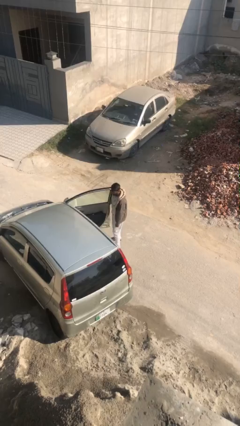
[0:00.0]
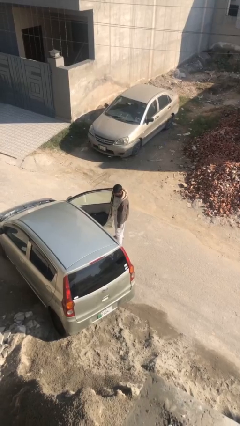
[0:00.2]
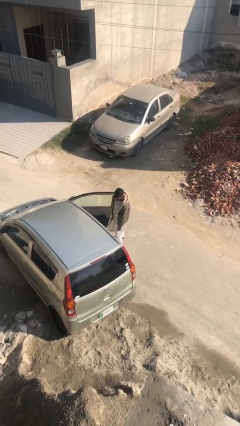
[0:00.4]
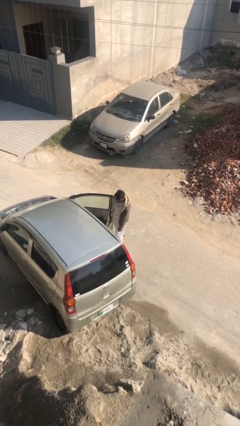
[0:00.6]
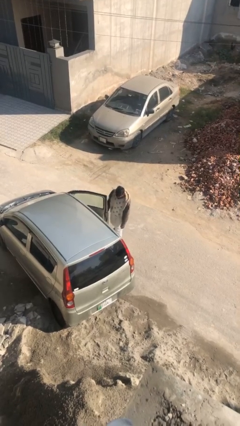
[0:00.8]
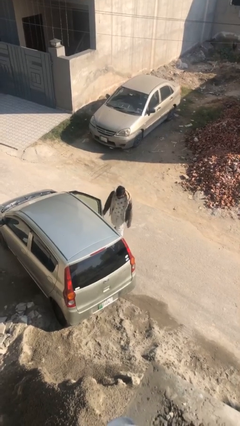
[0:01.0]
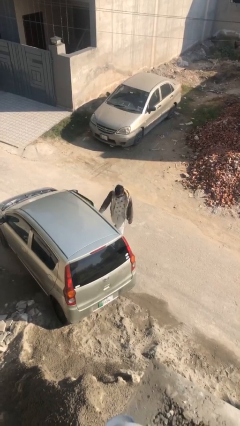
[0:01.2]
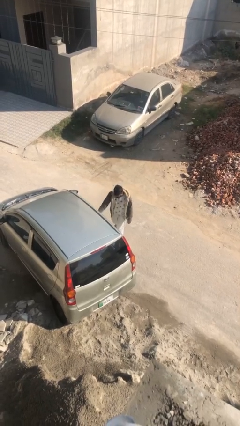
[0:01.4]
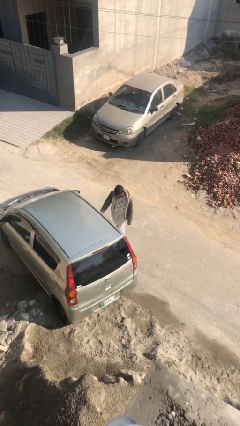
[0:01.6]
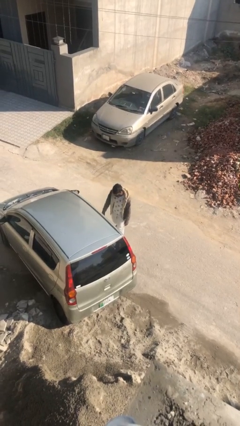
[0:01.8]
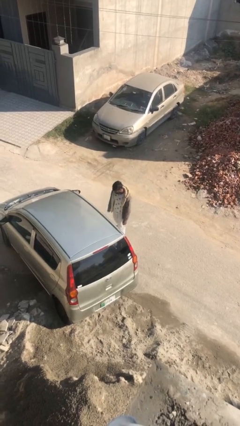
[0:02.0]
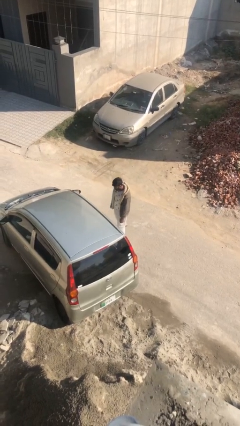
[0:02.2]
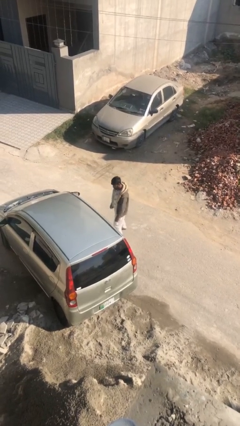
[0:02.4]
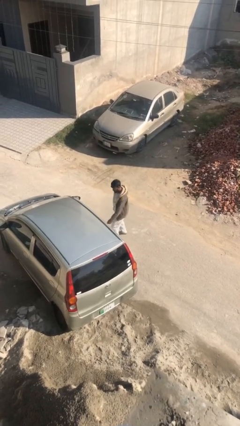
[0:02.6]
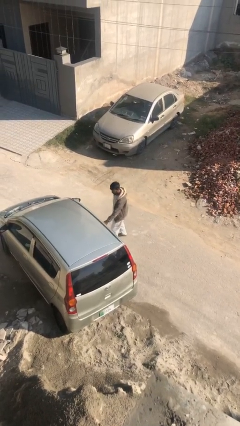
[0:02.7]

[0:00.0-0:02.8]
person closes car door

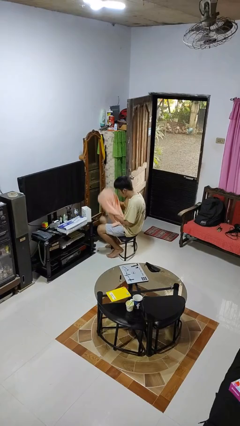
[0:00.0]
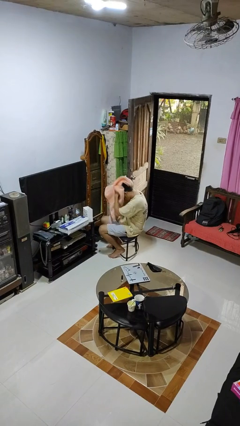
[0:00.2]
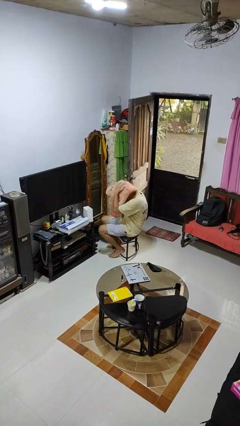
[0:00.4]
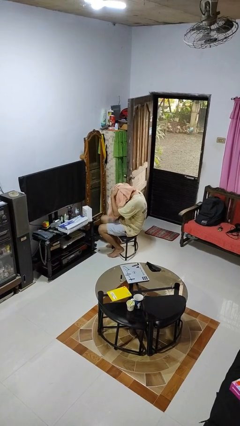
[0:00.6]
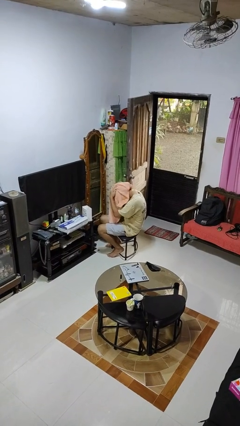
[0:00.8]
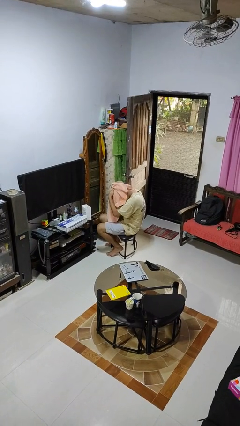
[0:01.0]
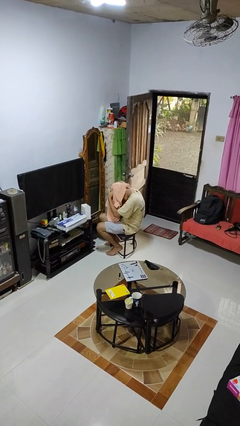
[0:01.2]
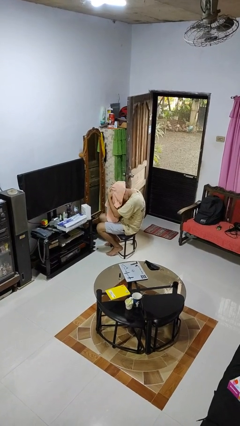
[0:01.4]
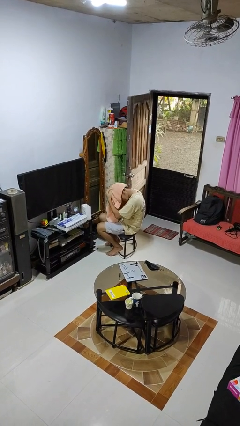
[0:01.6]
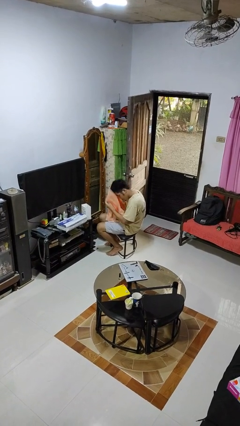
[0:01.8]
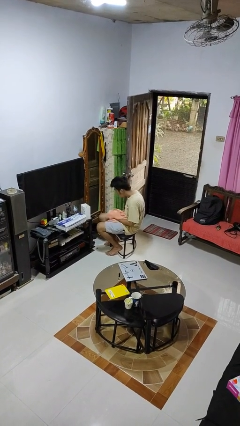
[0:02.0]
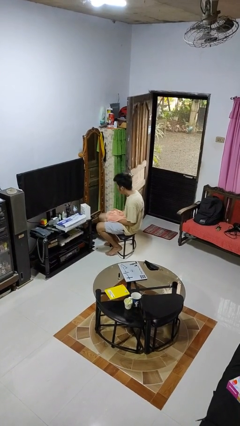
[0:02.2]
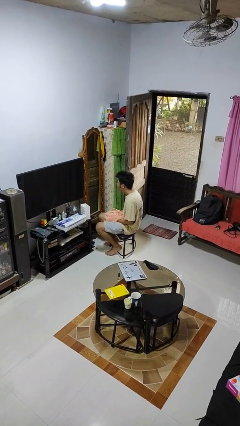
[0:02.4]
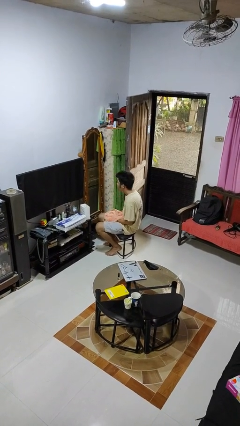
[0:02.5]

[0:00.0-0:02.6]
person dries hair with towel

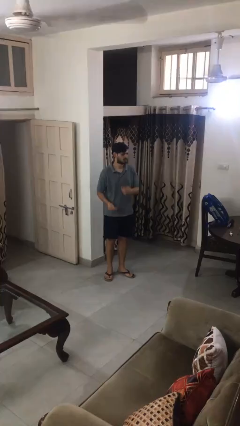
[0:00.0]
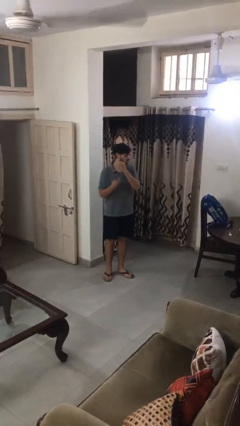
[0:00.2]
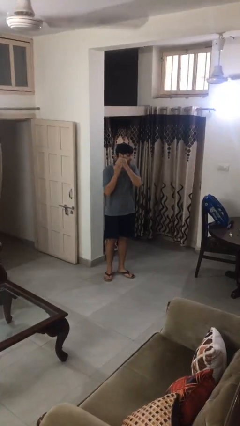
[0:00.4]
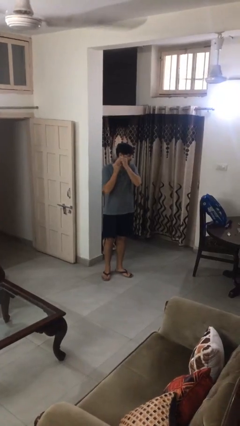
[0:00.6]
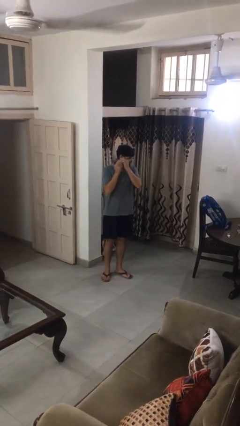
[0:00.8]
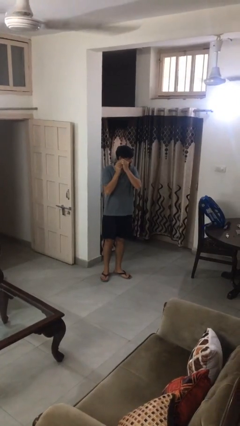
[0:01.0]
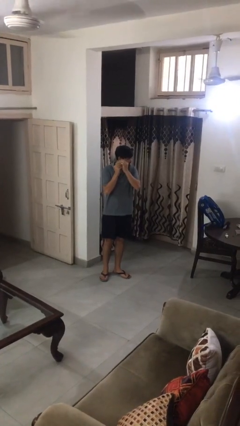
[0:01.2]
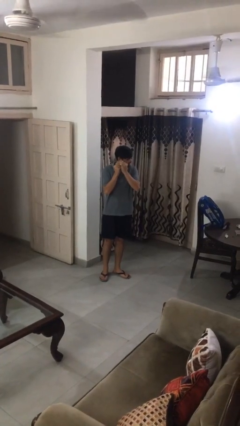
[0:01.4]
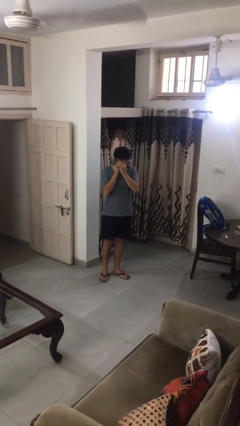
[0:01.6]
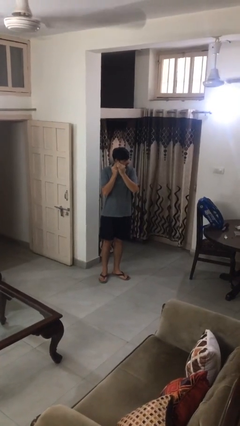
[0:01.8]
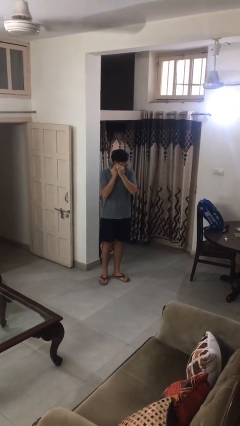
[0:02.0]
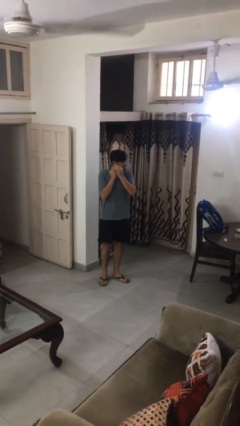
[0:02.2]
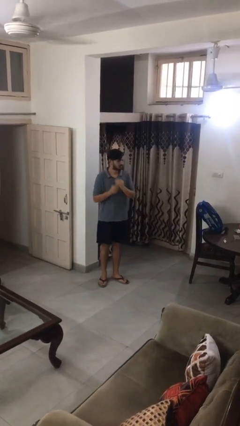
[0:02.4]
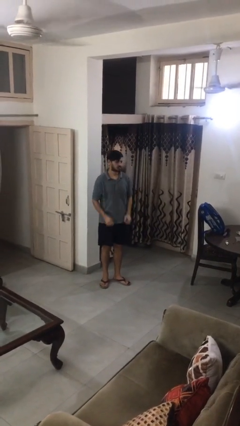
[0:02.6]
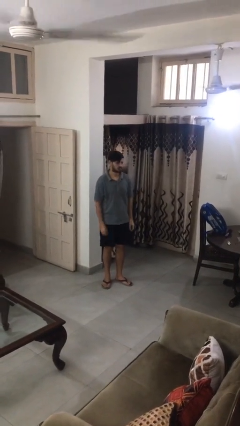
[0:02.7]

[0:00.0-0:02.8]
person puts on earrings

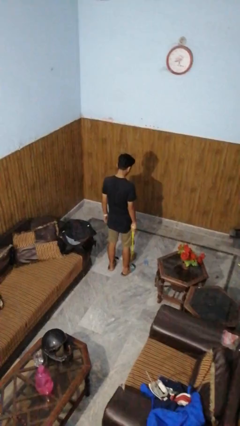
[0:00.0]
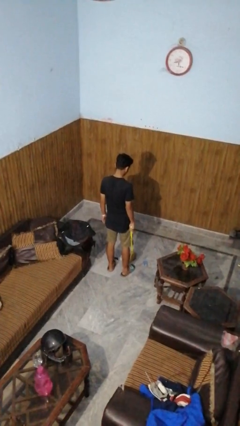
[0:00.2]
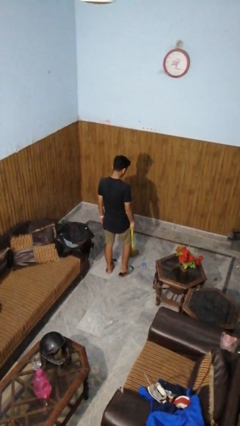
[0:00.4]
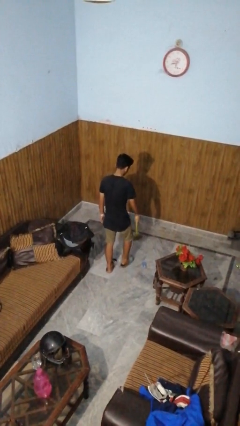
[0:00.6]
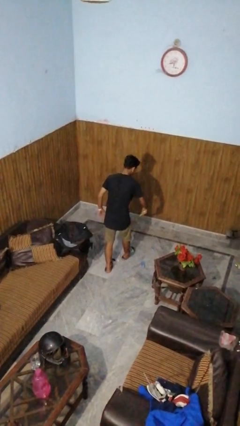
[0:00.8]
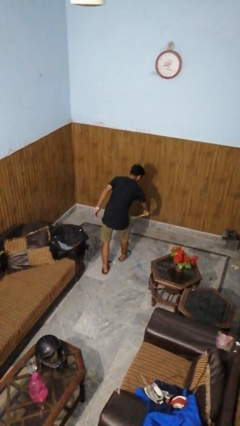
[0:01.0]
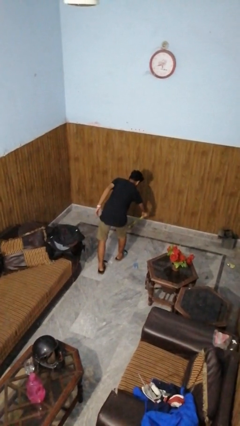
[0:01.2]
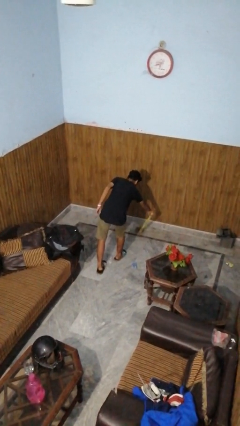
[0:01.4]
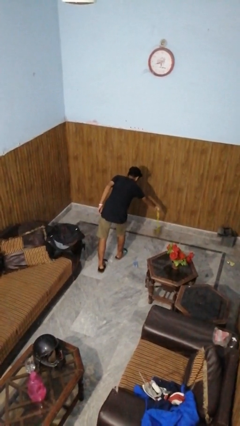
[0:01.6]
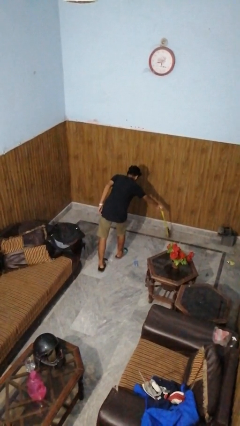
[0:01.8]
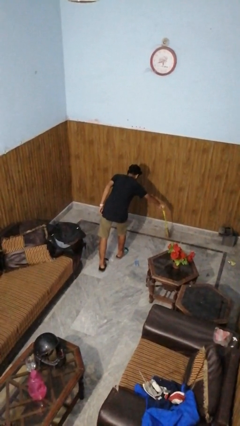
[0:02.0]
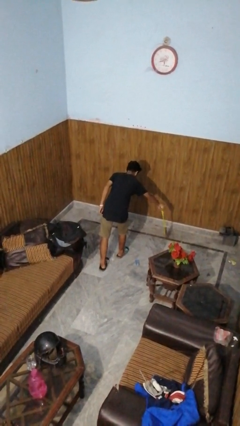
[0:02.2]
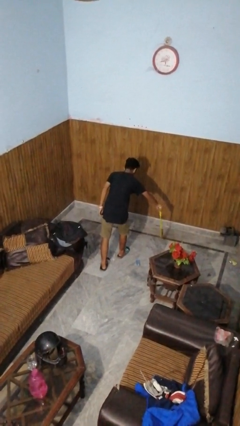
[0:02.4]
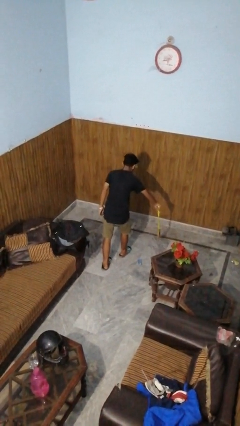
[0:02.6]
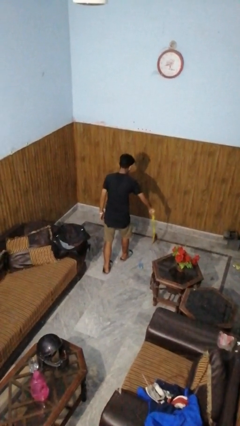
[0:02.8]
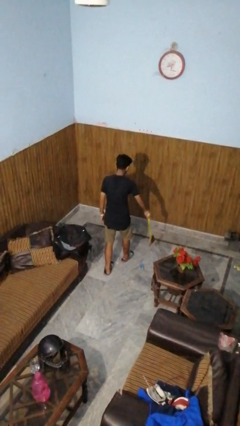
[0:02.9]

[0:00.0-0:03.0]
person sweeps floor

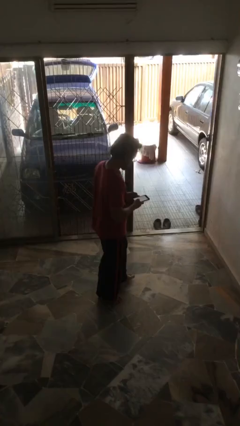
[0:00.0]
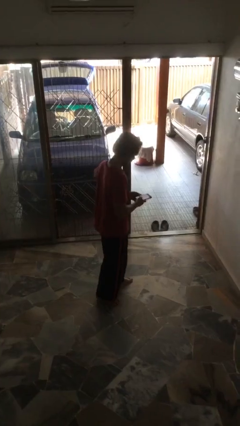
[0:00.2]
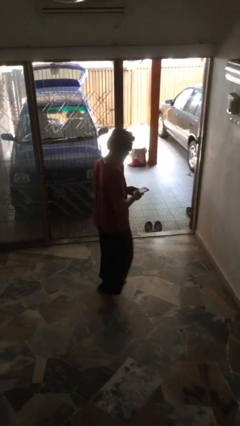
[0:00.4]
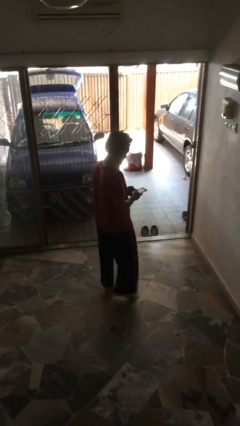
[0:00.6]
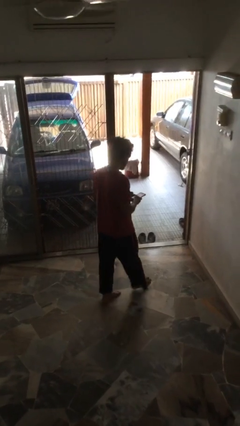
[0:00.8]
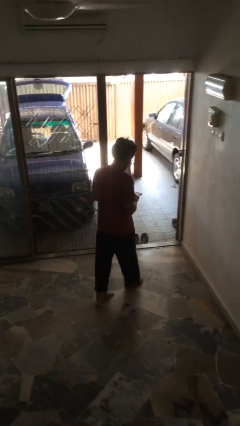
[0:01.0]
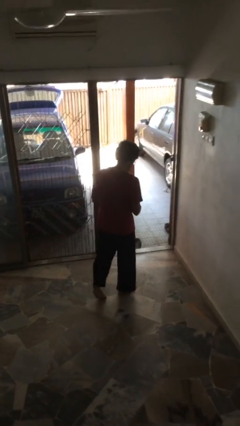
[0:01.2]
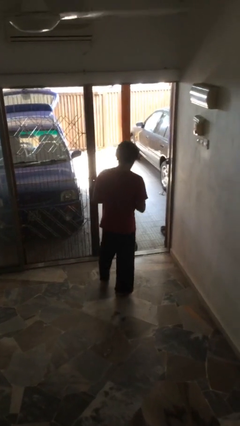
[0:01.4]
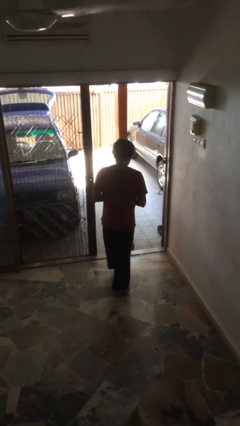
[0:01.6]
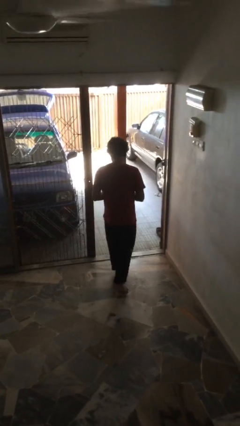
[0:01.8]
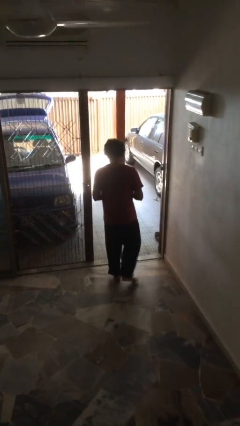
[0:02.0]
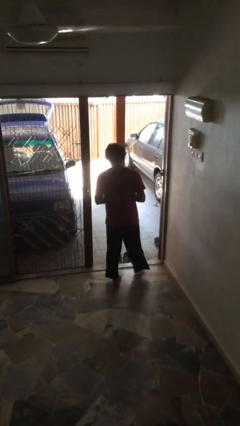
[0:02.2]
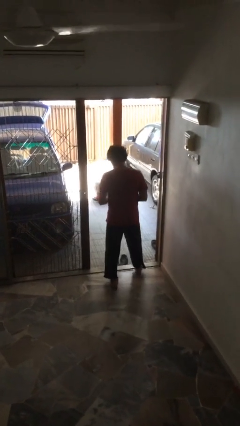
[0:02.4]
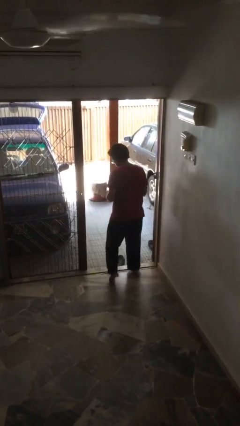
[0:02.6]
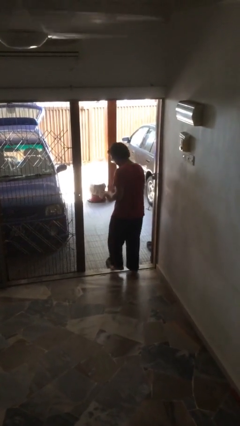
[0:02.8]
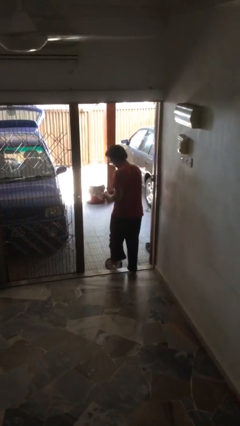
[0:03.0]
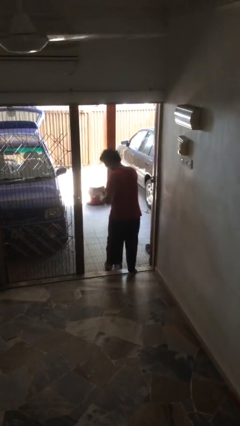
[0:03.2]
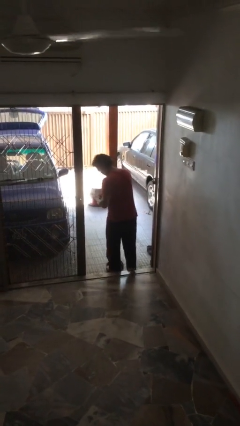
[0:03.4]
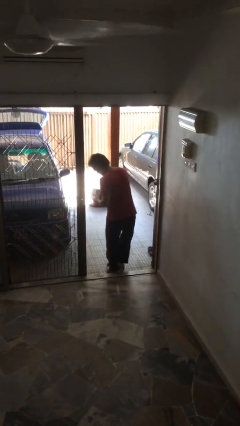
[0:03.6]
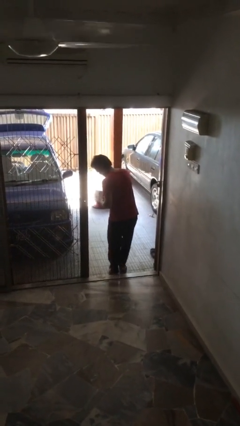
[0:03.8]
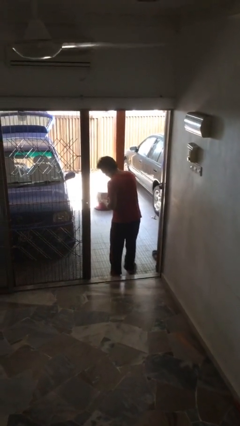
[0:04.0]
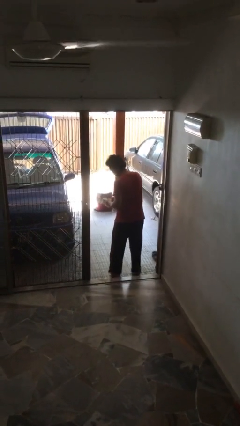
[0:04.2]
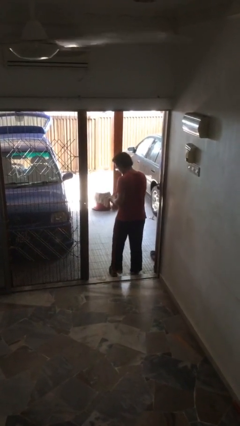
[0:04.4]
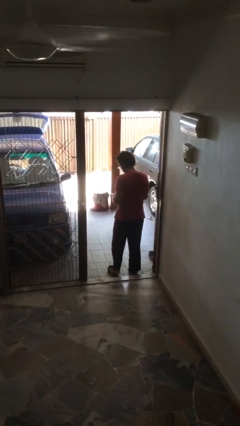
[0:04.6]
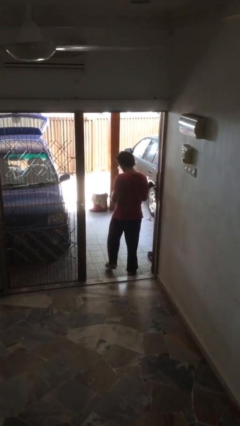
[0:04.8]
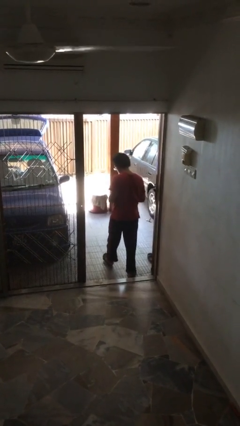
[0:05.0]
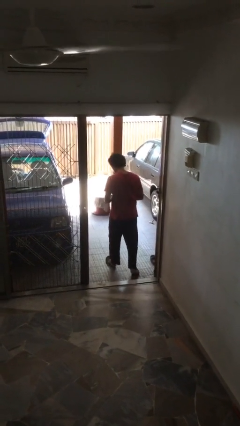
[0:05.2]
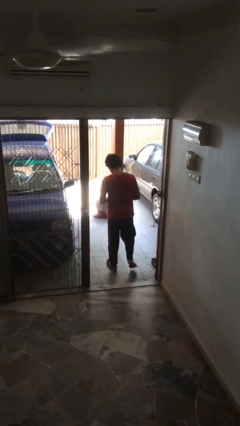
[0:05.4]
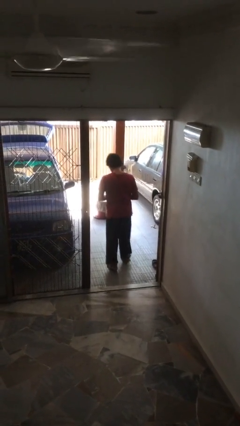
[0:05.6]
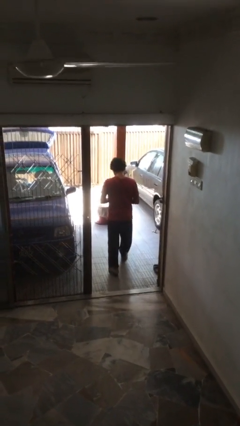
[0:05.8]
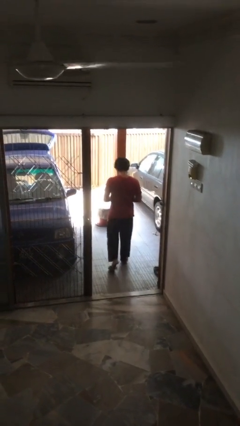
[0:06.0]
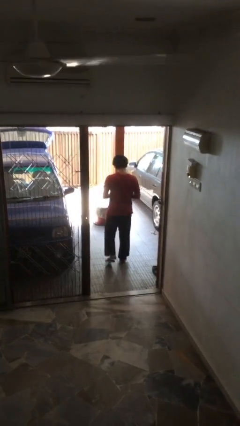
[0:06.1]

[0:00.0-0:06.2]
person texts on phone

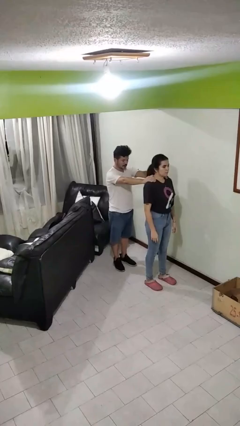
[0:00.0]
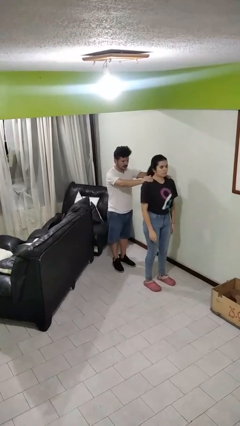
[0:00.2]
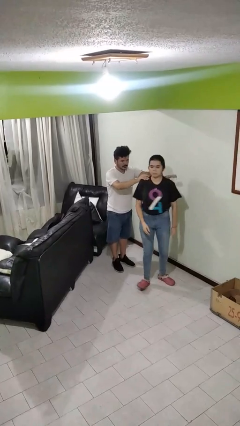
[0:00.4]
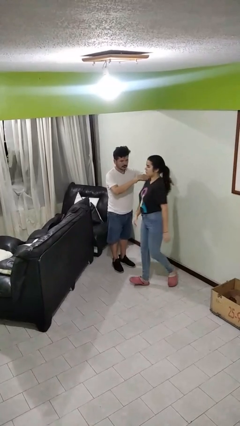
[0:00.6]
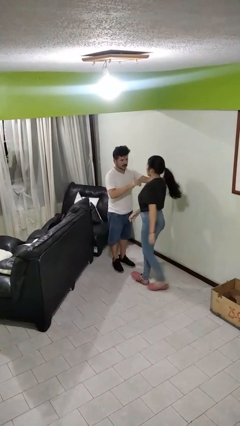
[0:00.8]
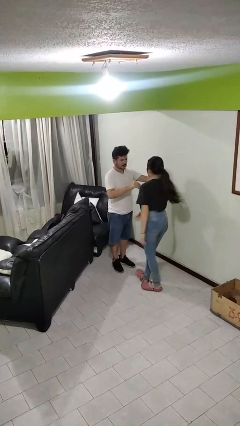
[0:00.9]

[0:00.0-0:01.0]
person spins person around
